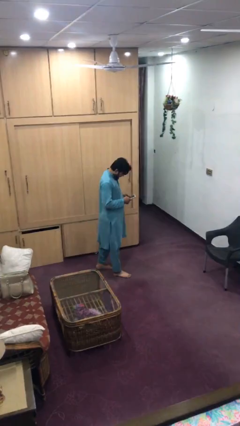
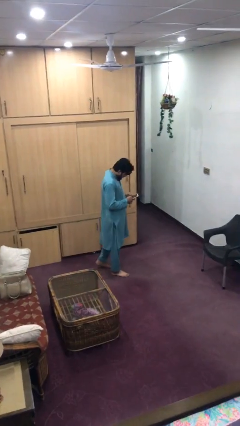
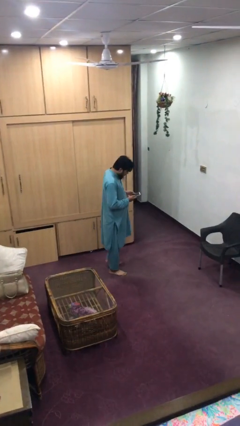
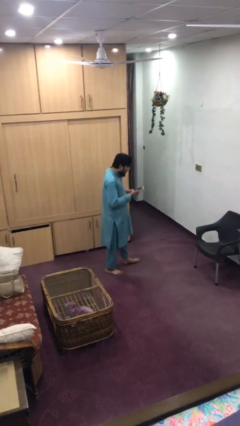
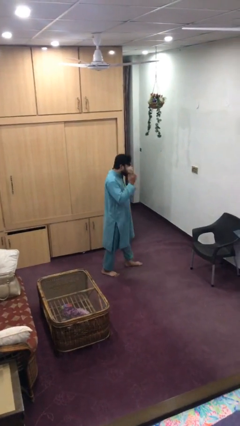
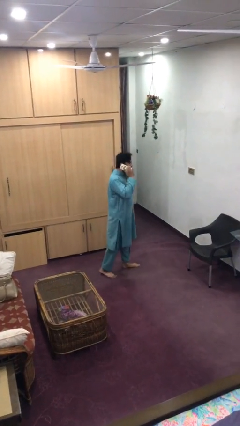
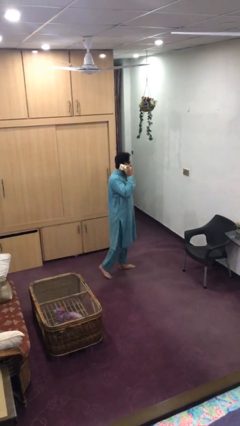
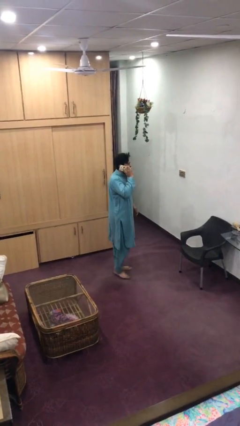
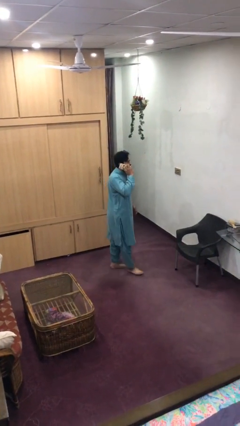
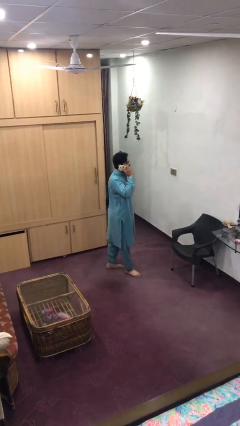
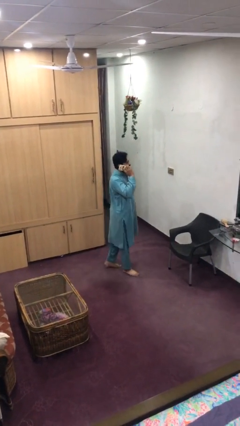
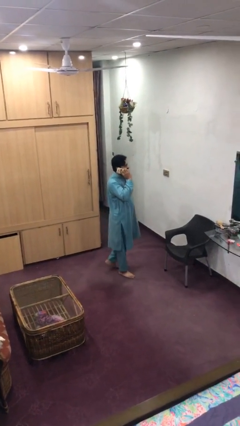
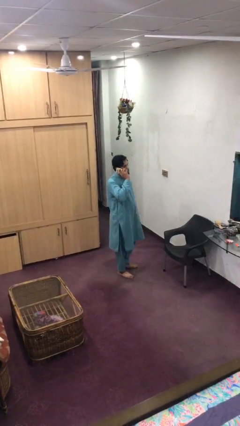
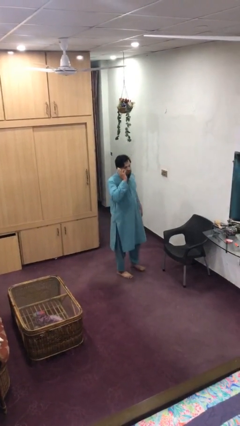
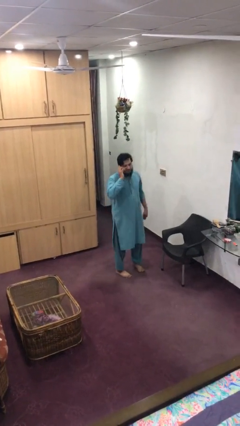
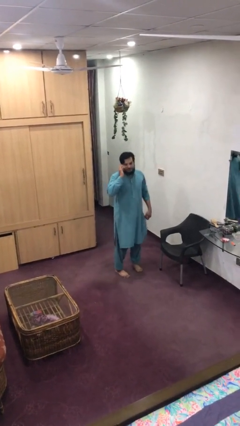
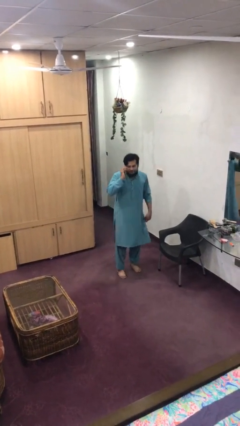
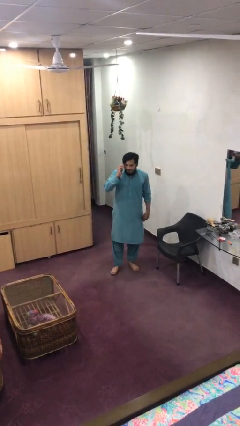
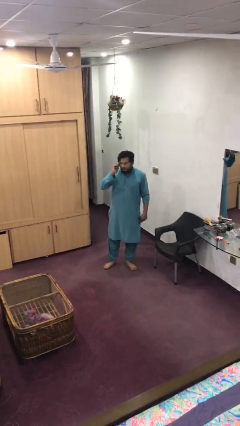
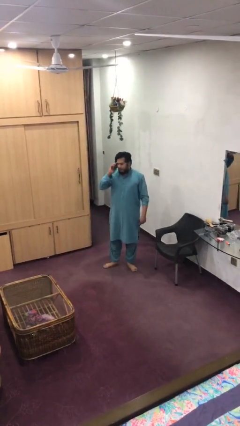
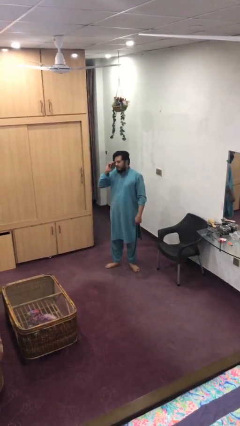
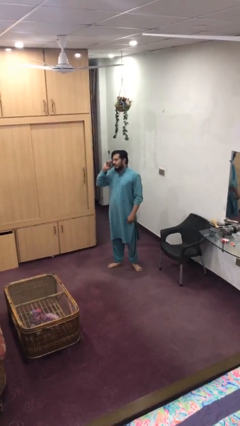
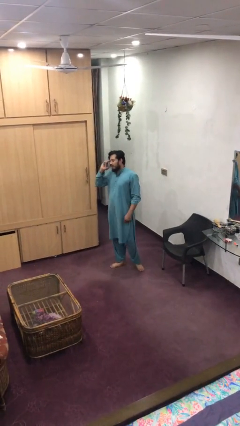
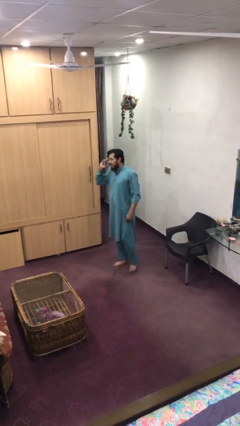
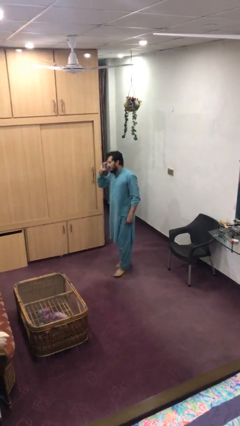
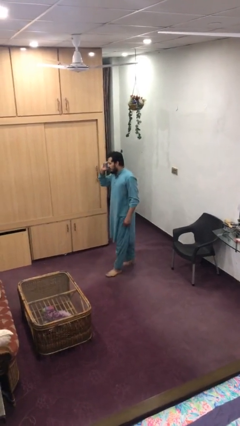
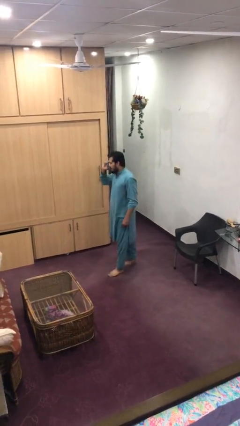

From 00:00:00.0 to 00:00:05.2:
person talks on phone

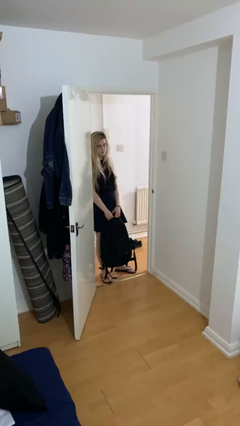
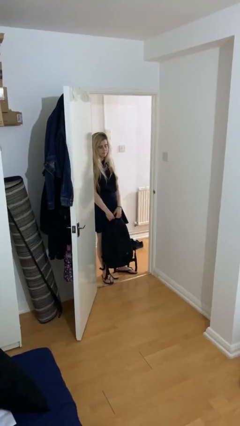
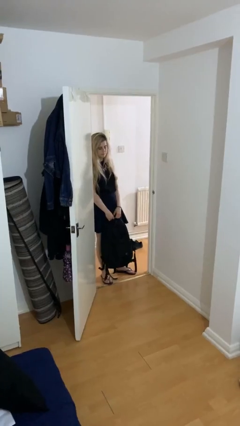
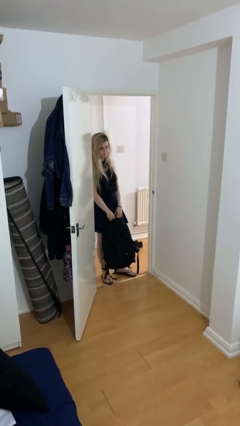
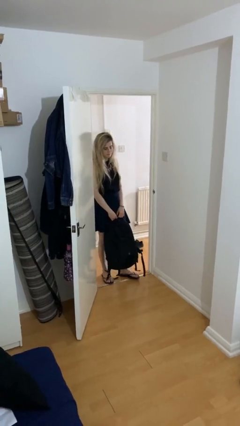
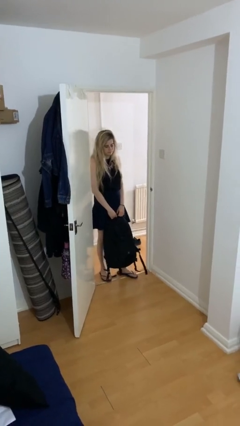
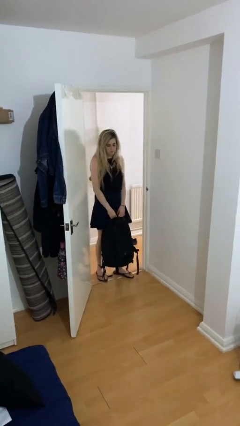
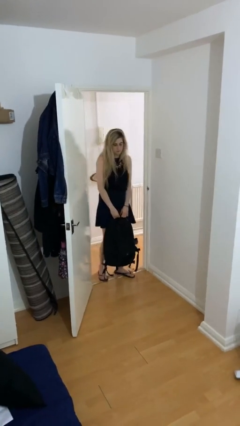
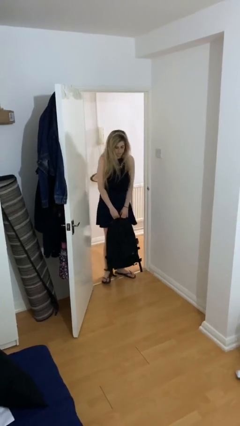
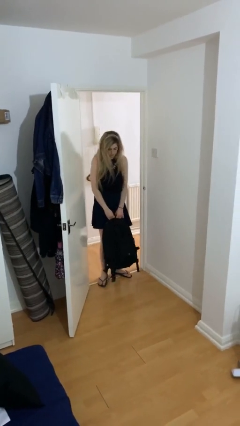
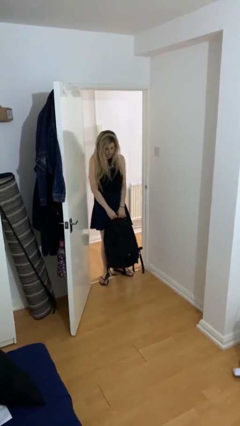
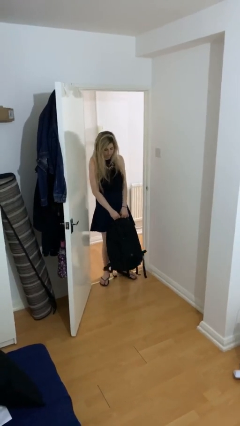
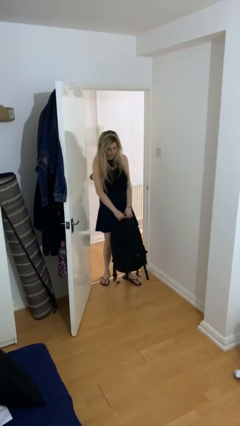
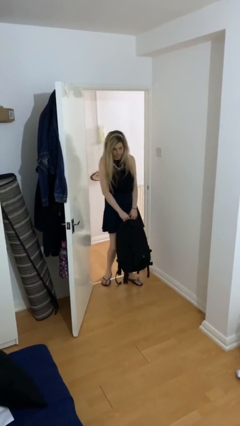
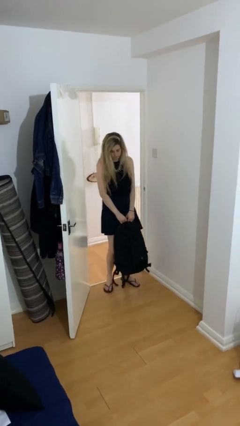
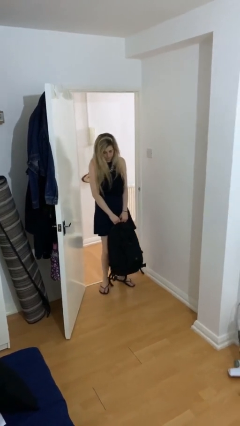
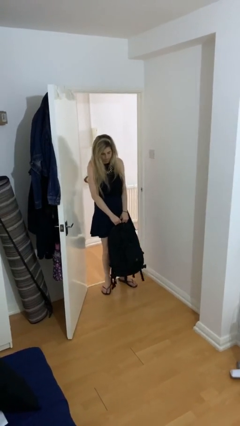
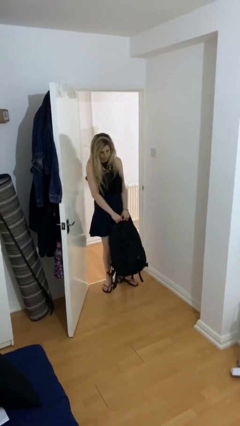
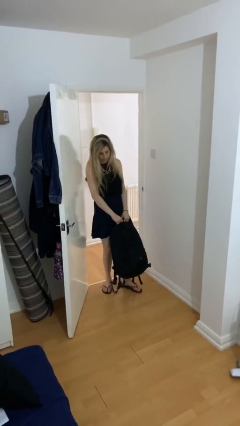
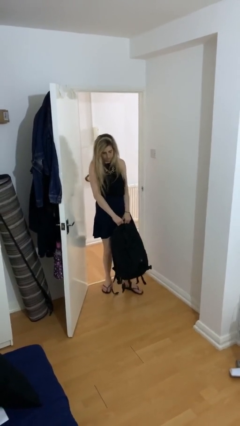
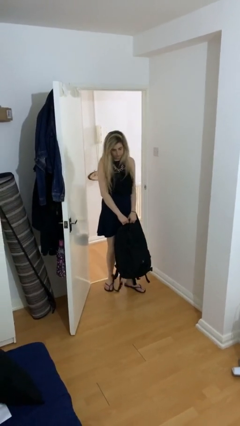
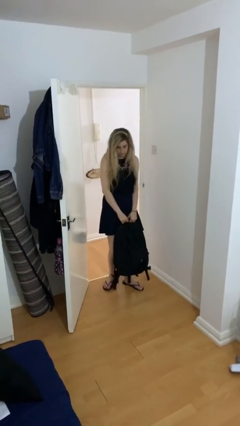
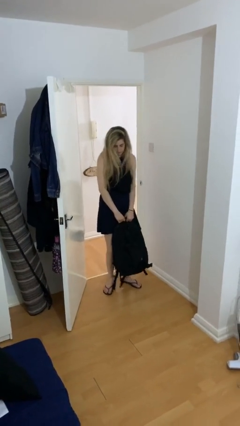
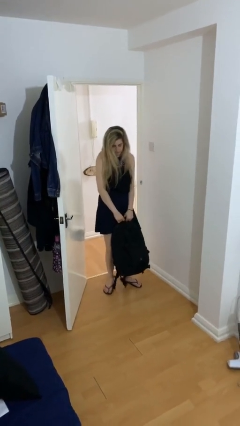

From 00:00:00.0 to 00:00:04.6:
person carries heavy object

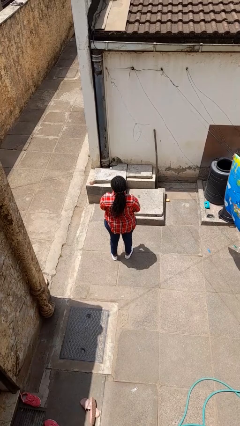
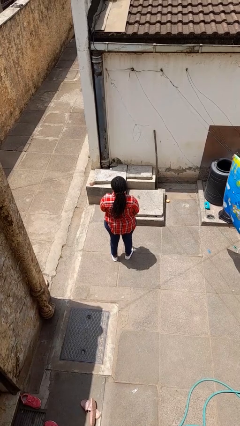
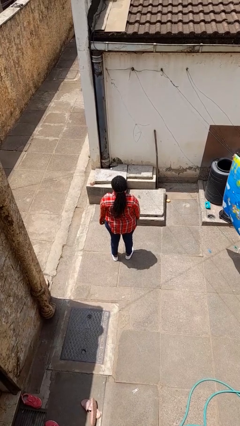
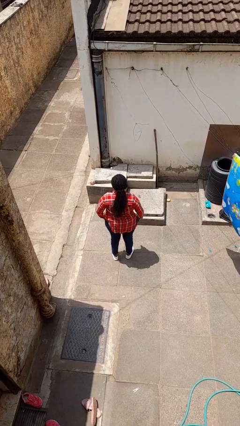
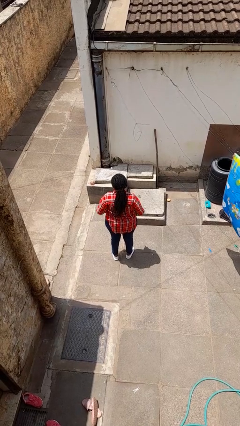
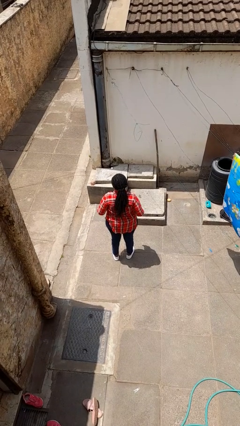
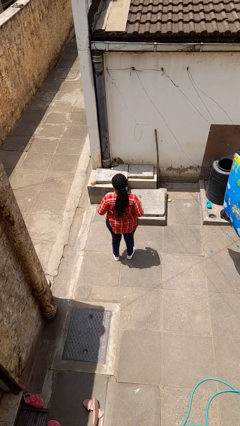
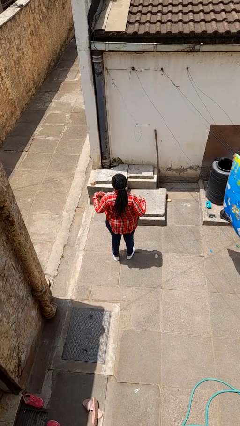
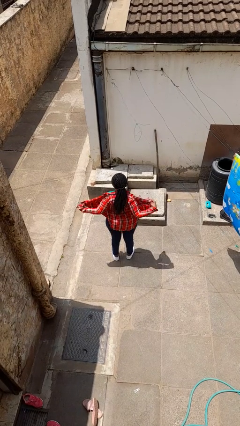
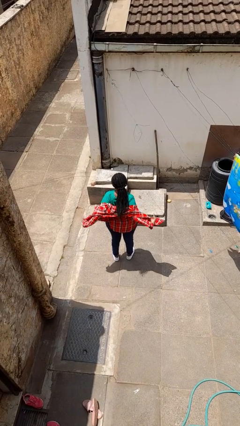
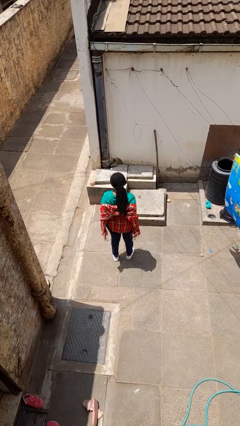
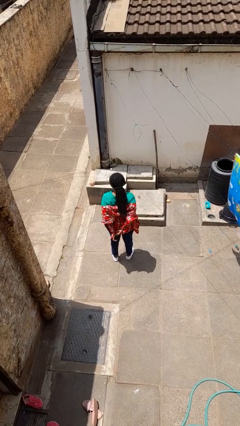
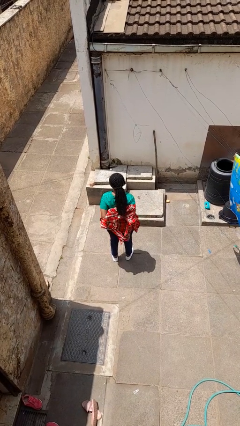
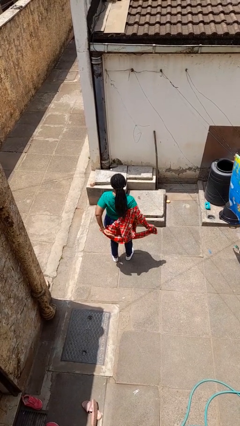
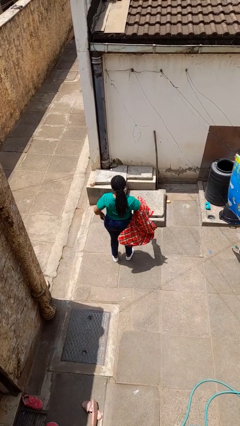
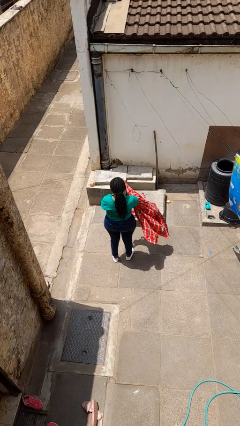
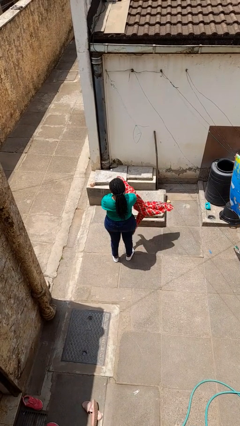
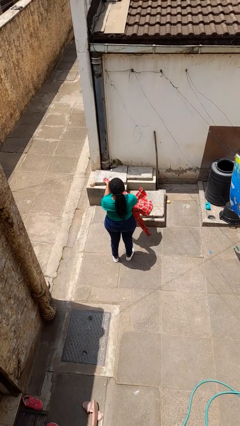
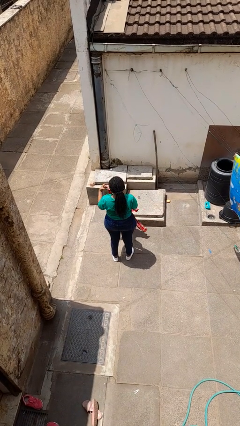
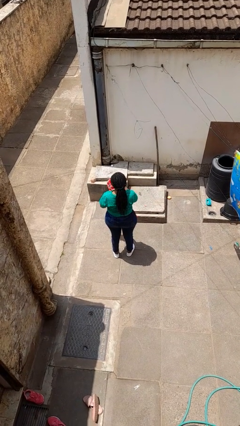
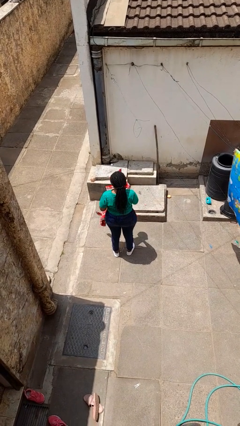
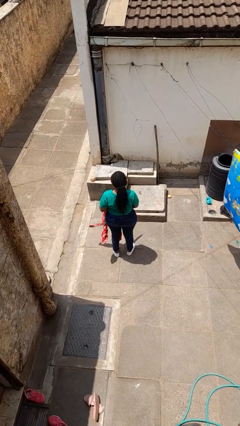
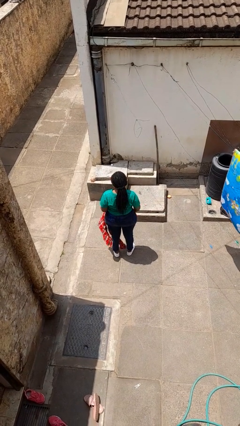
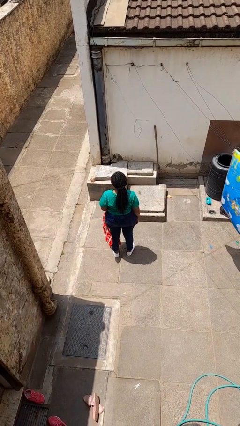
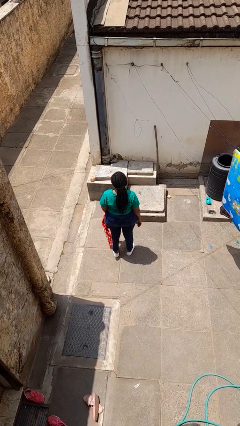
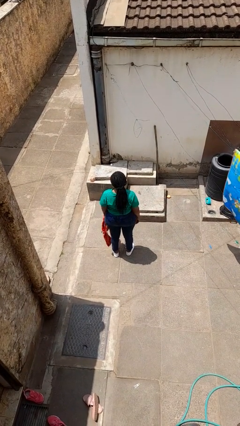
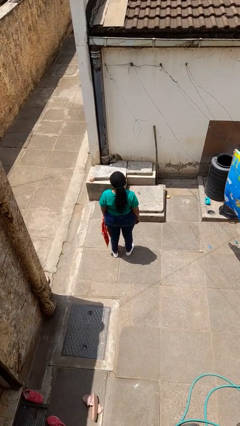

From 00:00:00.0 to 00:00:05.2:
person takes off shirt

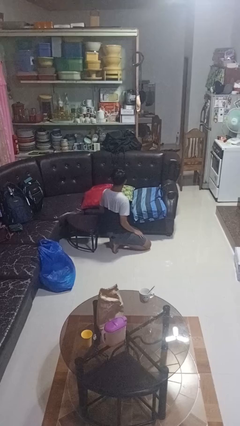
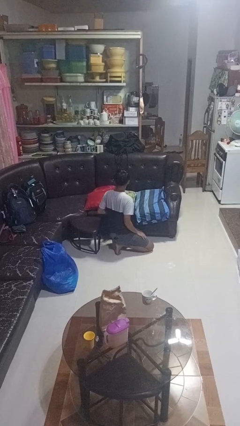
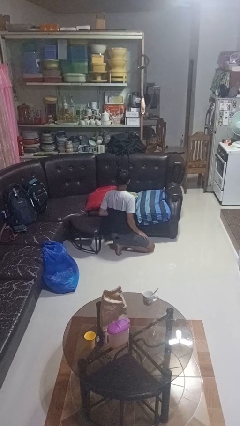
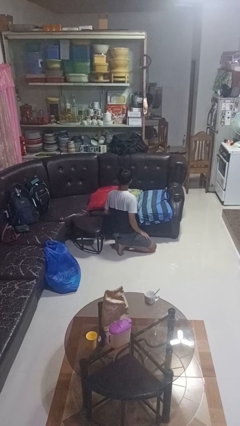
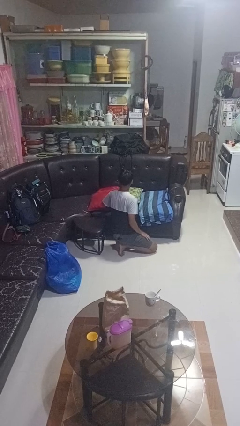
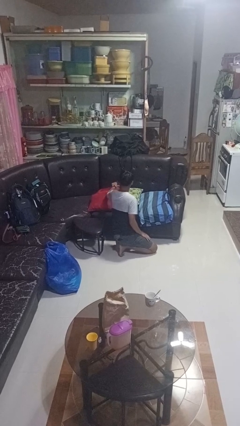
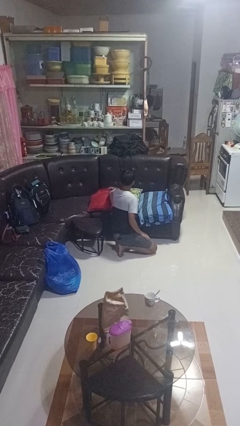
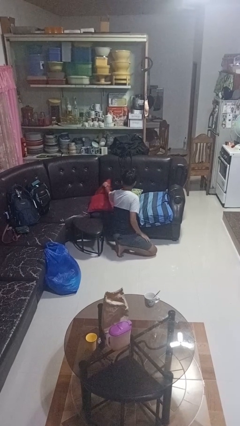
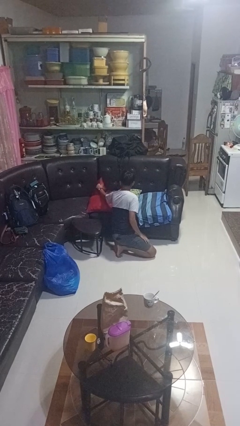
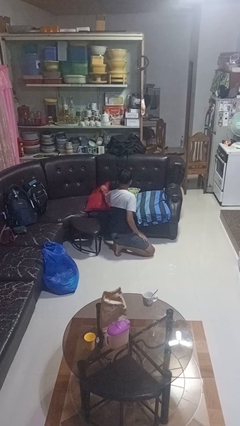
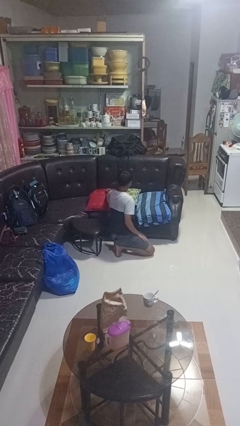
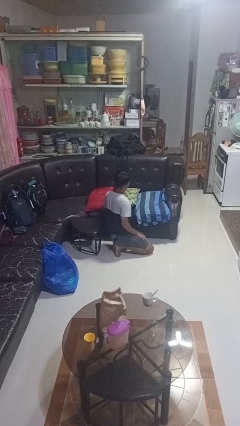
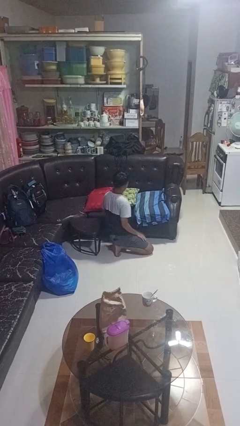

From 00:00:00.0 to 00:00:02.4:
person searches in couch

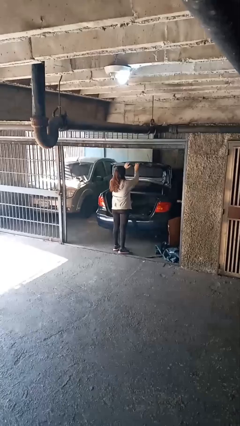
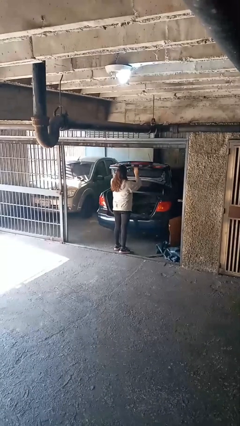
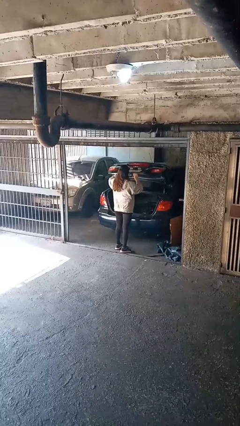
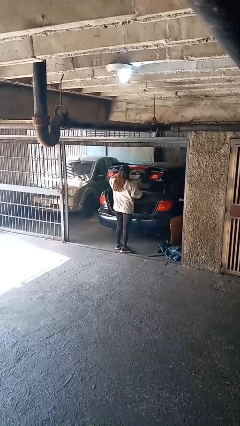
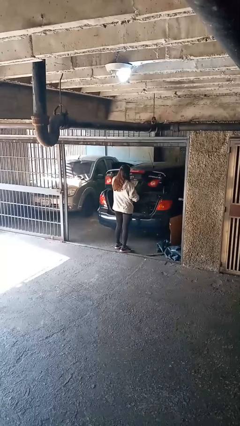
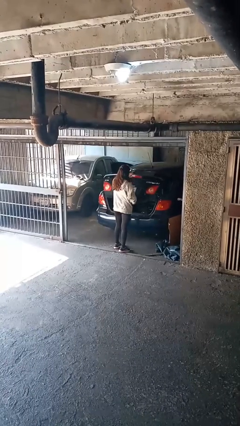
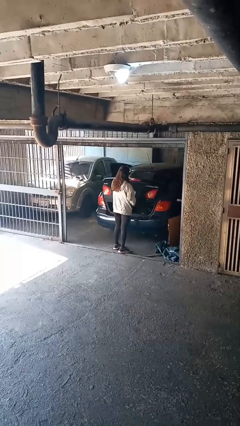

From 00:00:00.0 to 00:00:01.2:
person closes car trunk
